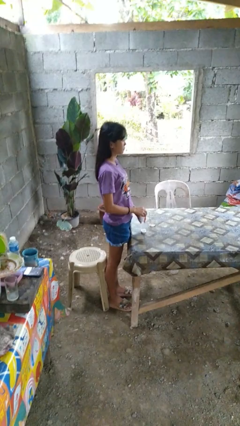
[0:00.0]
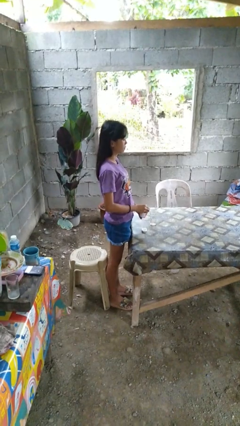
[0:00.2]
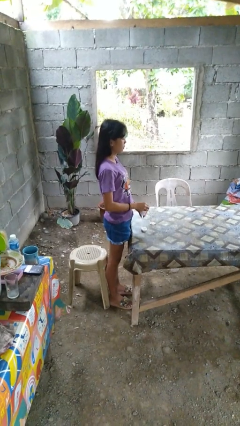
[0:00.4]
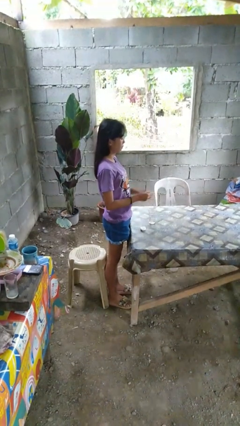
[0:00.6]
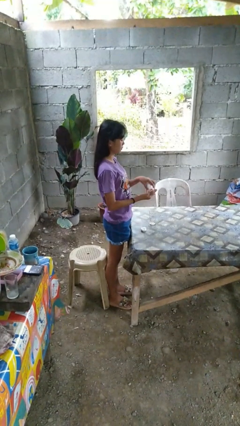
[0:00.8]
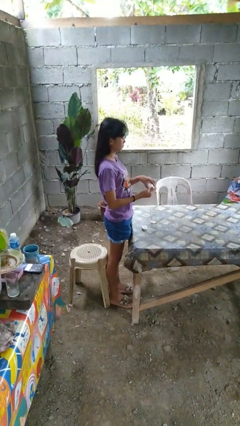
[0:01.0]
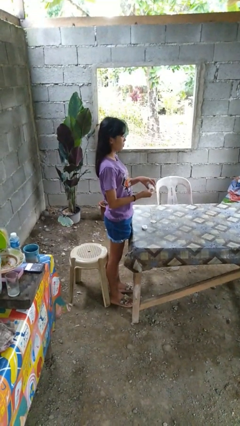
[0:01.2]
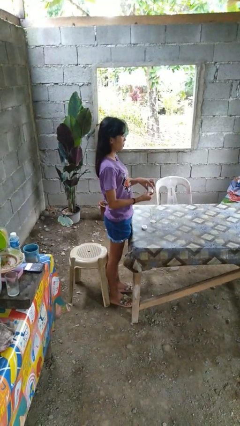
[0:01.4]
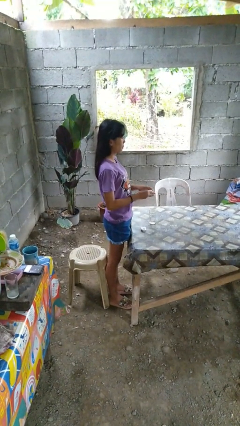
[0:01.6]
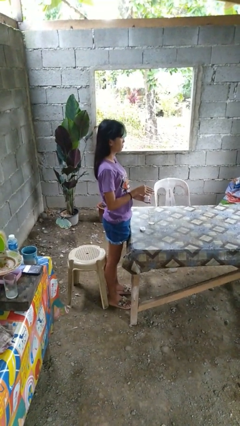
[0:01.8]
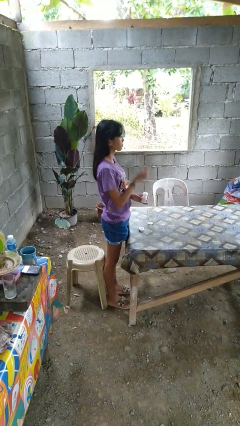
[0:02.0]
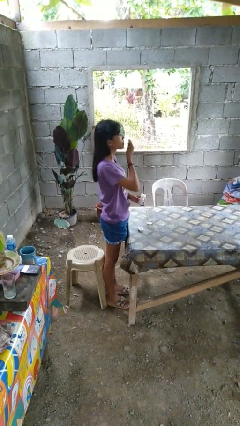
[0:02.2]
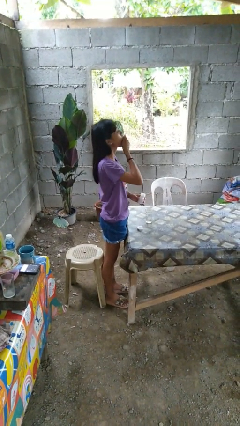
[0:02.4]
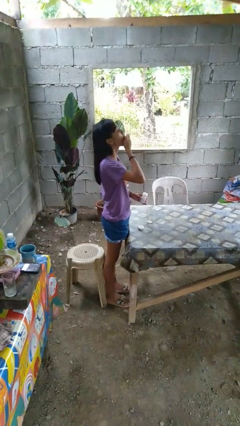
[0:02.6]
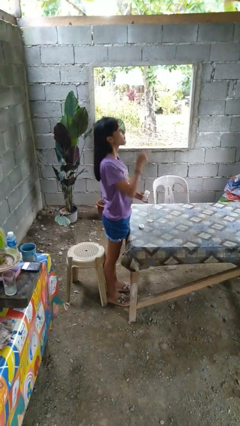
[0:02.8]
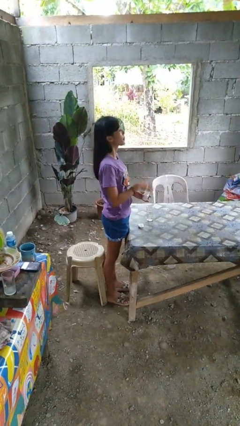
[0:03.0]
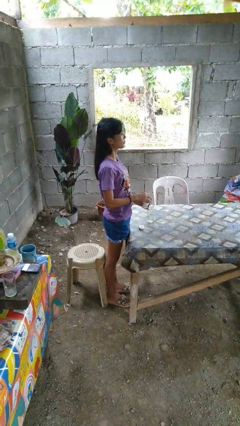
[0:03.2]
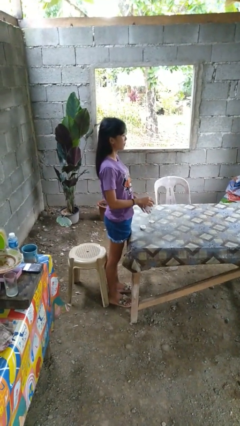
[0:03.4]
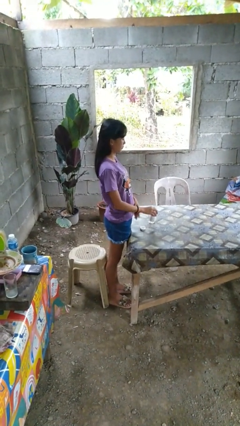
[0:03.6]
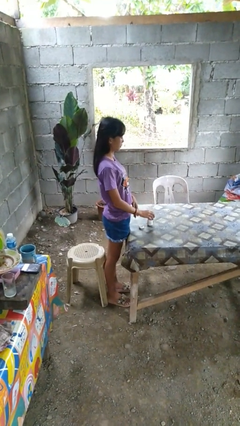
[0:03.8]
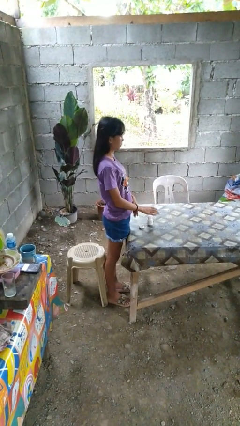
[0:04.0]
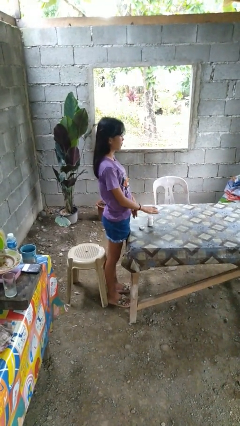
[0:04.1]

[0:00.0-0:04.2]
person takes medicine pills

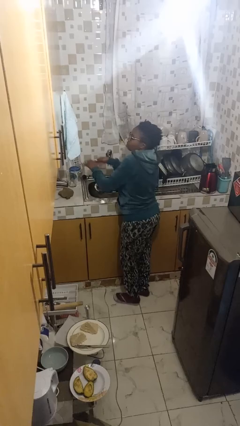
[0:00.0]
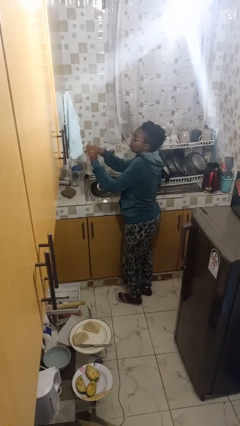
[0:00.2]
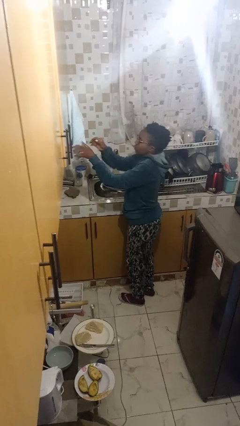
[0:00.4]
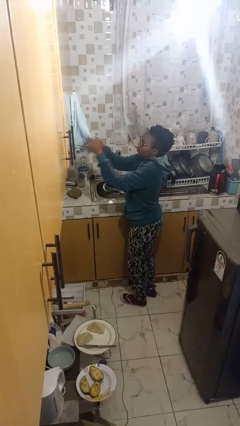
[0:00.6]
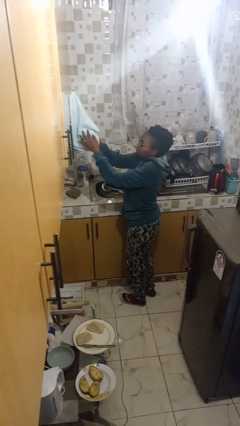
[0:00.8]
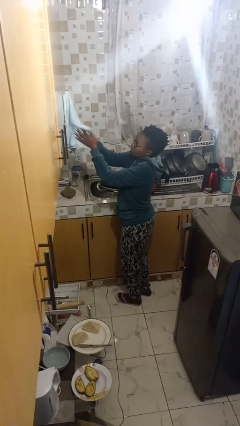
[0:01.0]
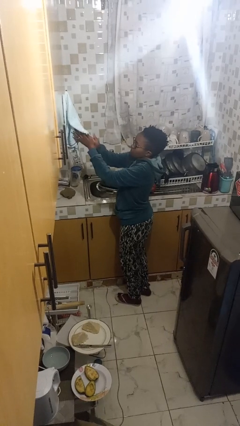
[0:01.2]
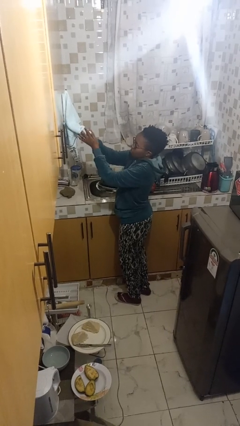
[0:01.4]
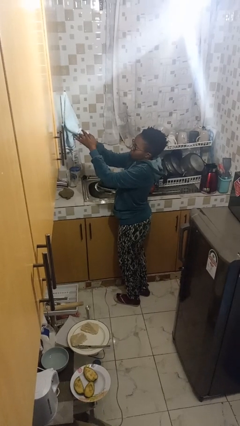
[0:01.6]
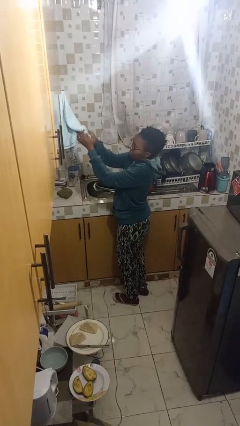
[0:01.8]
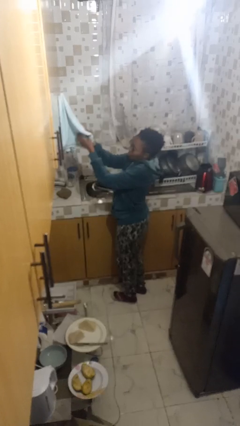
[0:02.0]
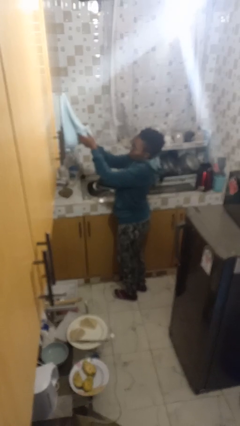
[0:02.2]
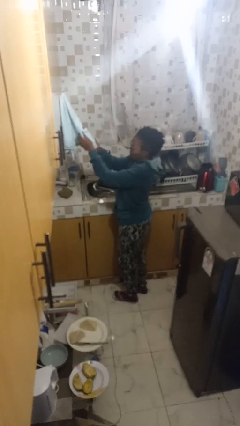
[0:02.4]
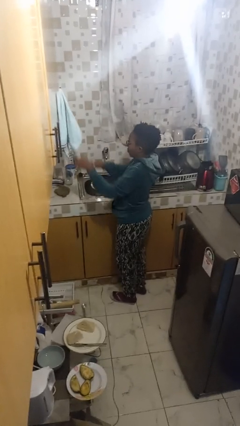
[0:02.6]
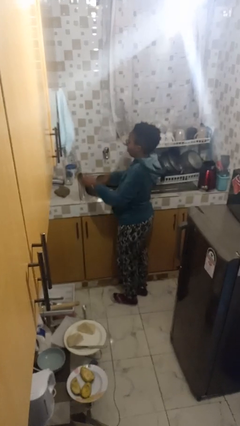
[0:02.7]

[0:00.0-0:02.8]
person dries hands with towel

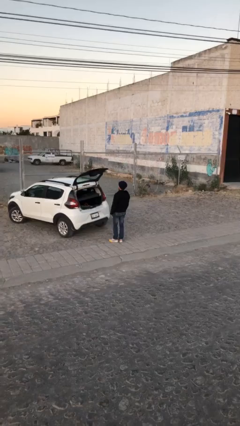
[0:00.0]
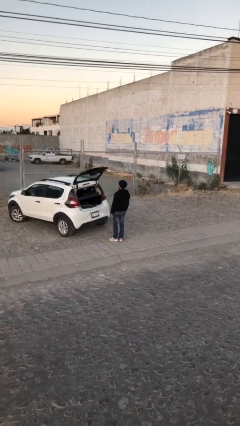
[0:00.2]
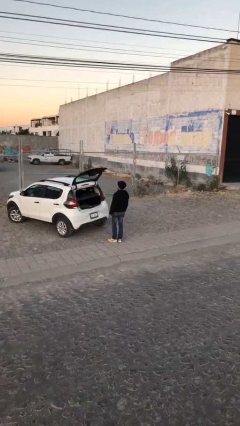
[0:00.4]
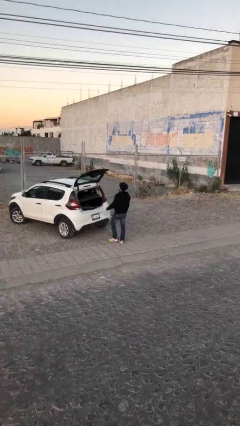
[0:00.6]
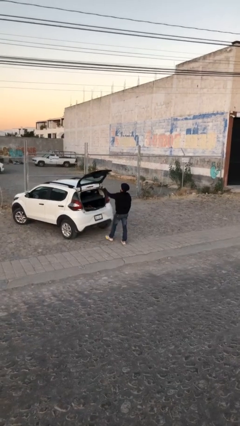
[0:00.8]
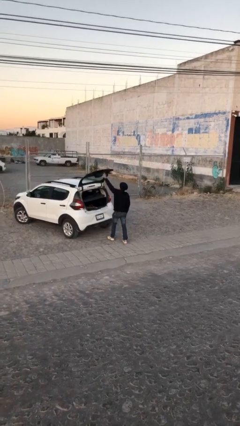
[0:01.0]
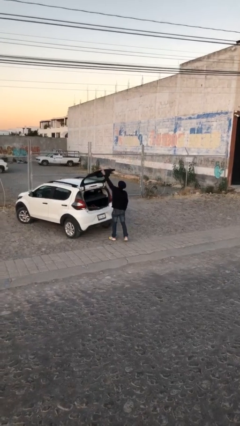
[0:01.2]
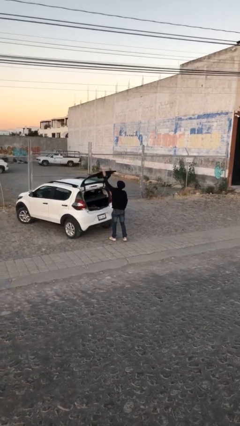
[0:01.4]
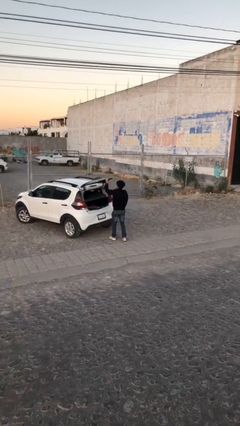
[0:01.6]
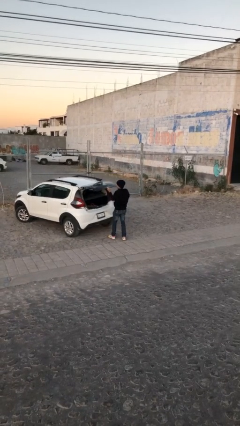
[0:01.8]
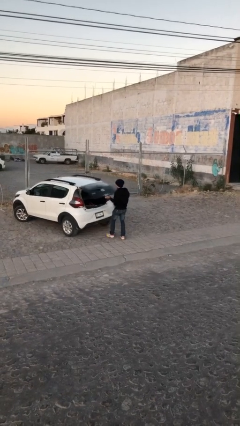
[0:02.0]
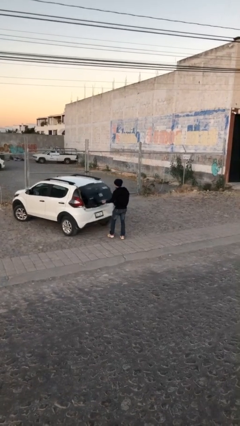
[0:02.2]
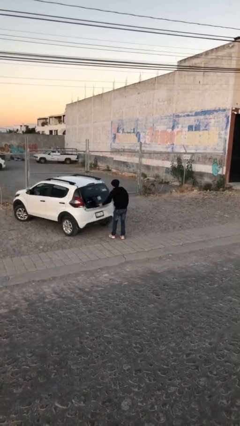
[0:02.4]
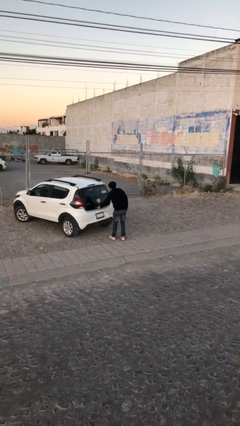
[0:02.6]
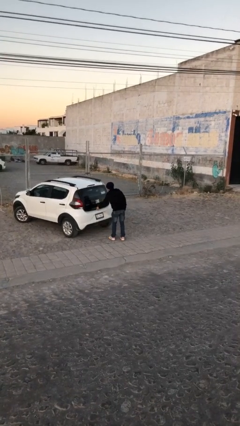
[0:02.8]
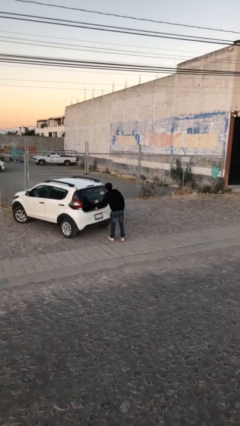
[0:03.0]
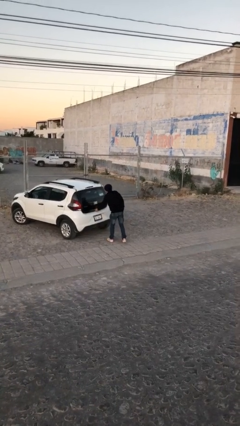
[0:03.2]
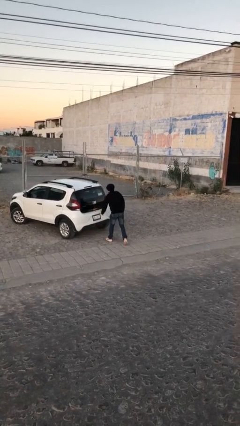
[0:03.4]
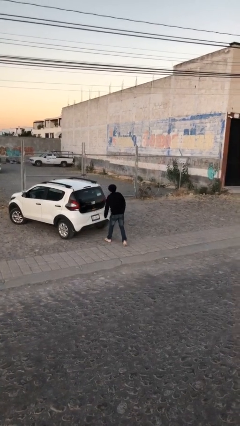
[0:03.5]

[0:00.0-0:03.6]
person closes car trunk

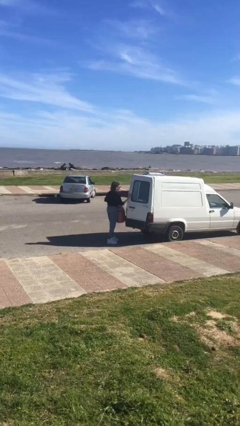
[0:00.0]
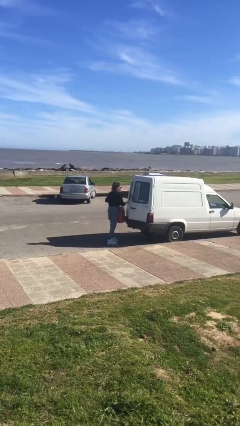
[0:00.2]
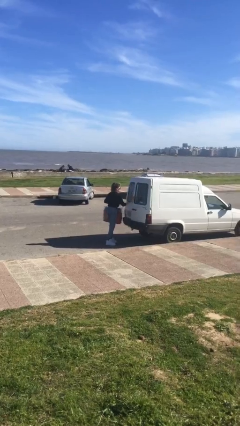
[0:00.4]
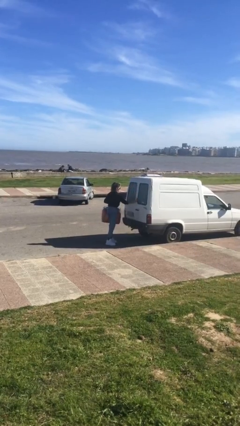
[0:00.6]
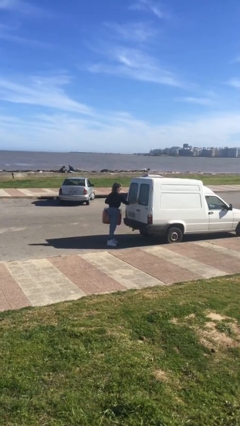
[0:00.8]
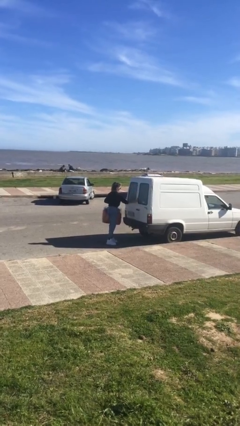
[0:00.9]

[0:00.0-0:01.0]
person closes car door

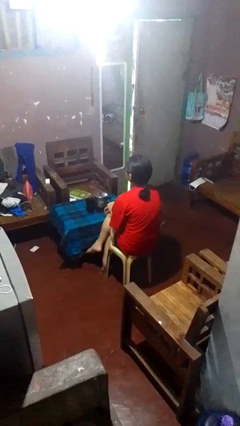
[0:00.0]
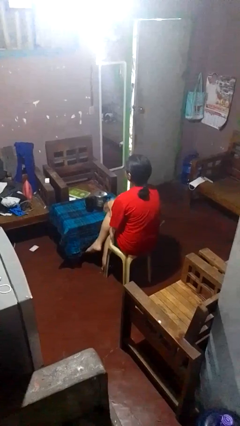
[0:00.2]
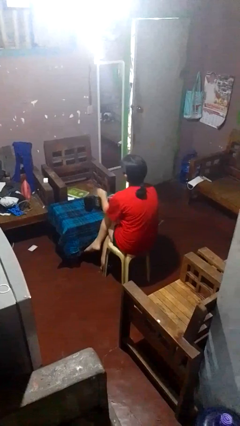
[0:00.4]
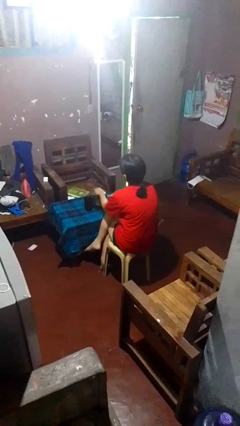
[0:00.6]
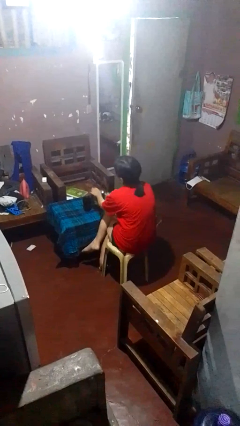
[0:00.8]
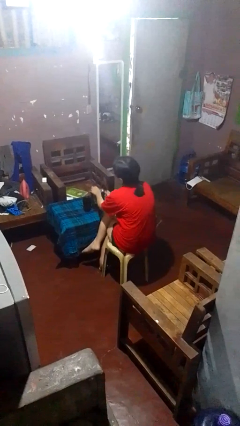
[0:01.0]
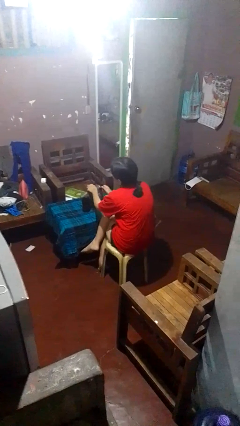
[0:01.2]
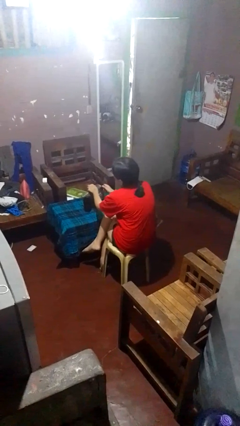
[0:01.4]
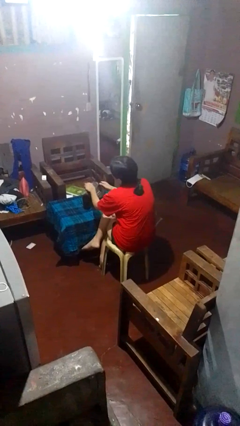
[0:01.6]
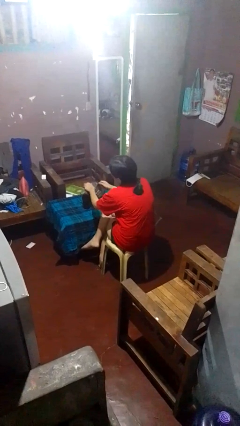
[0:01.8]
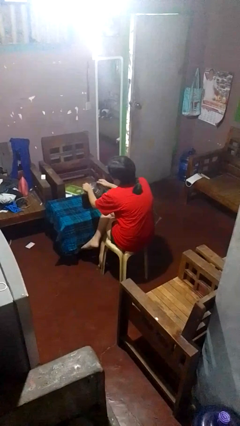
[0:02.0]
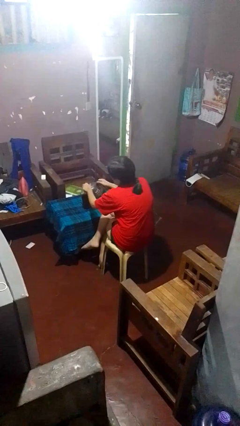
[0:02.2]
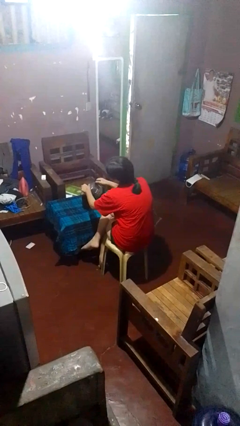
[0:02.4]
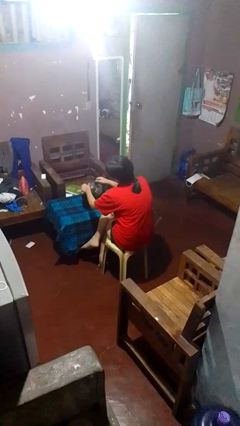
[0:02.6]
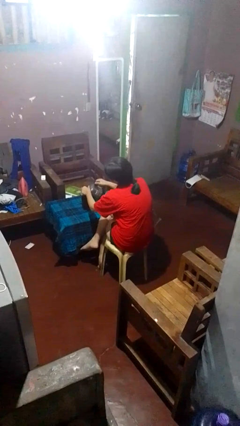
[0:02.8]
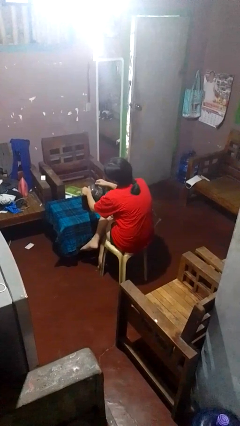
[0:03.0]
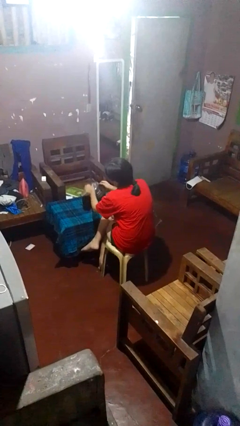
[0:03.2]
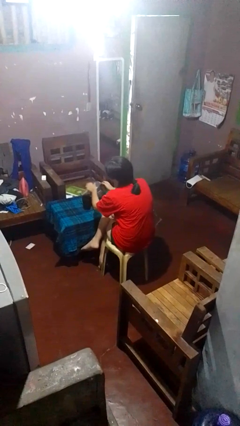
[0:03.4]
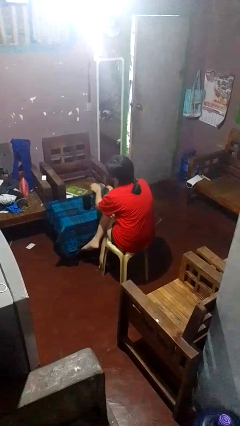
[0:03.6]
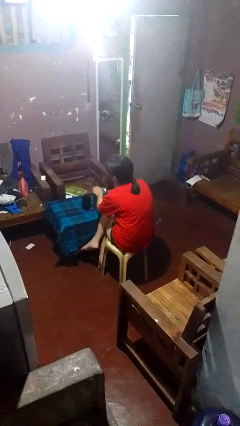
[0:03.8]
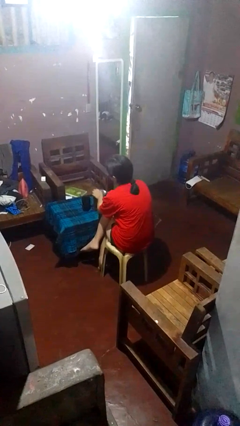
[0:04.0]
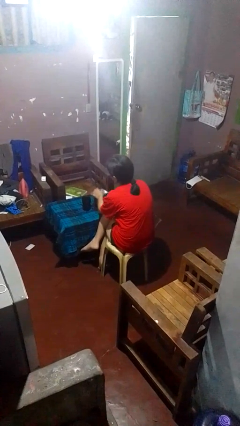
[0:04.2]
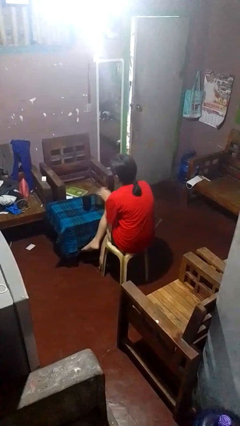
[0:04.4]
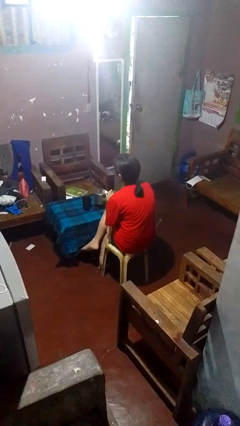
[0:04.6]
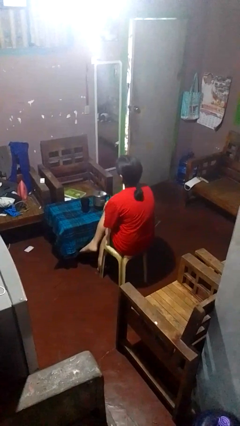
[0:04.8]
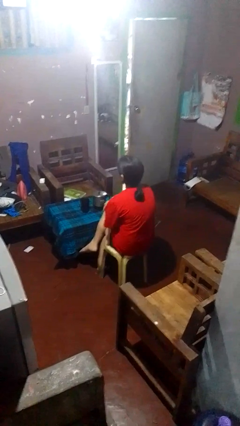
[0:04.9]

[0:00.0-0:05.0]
person pours coffee into mug

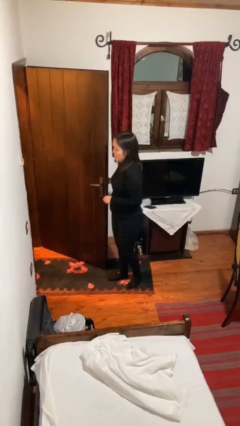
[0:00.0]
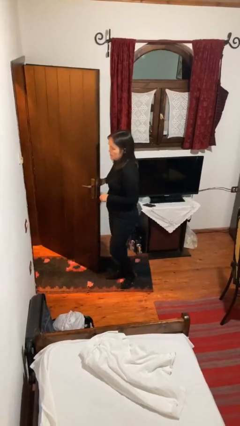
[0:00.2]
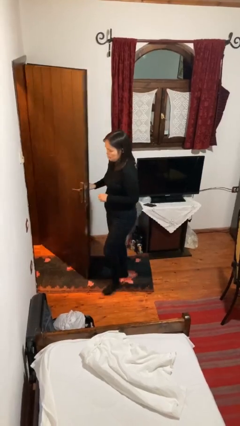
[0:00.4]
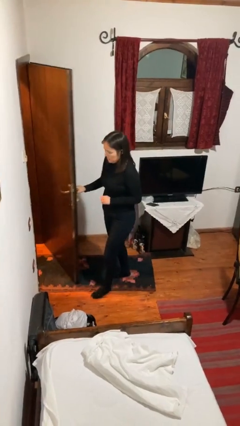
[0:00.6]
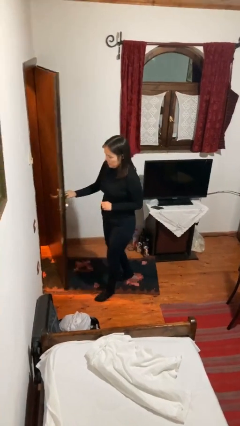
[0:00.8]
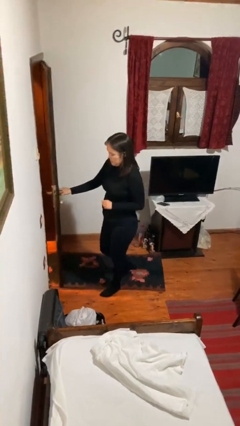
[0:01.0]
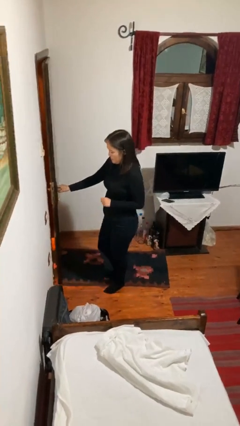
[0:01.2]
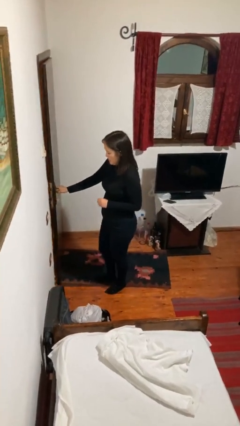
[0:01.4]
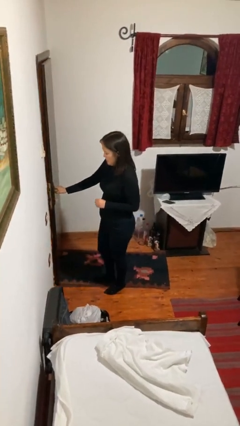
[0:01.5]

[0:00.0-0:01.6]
person closes facility door
